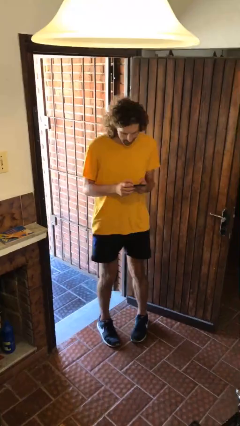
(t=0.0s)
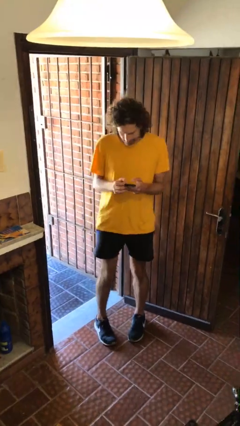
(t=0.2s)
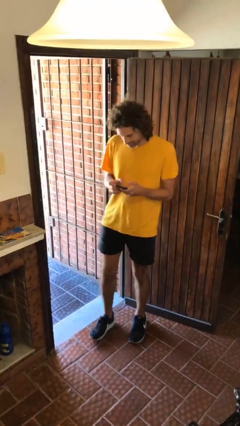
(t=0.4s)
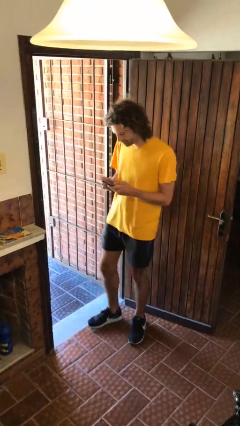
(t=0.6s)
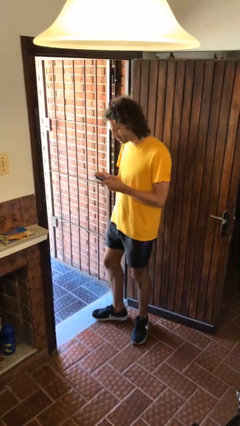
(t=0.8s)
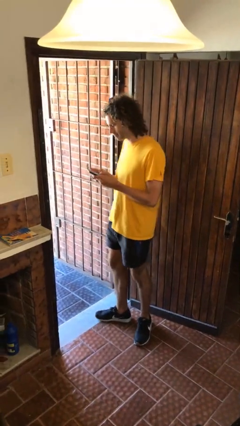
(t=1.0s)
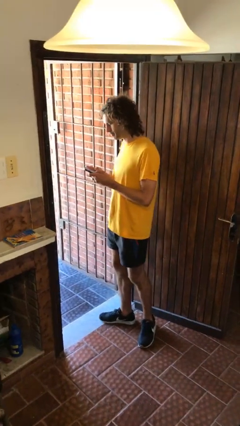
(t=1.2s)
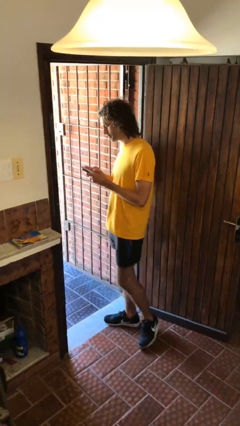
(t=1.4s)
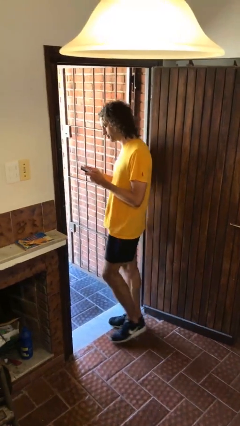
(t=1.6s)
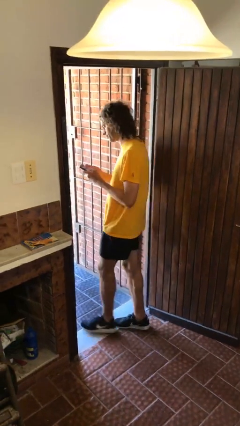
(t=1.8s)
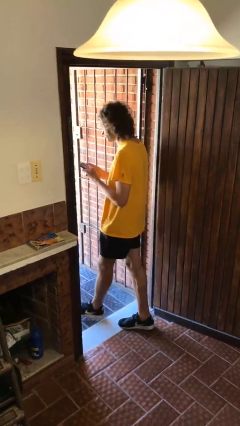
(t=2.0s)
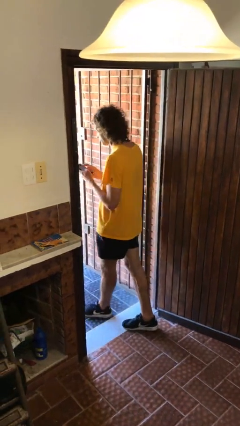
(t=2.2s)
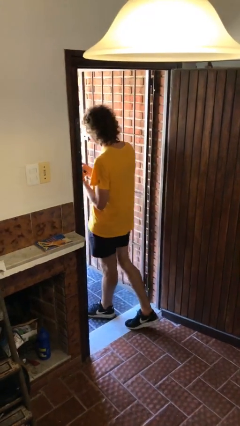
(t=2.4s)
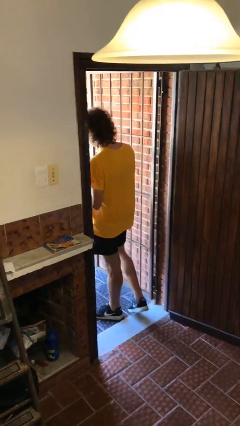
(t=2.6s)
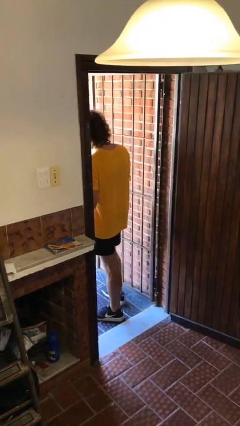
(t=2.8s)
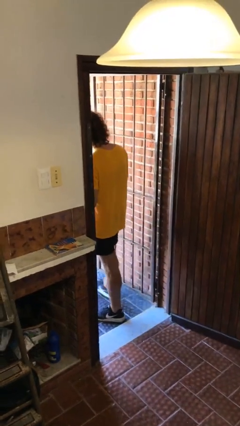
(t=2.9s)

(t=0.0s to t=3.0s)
person exits scene through structure

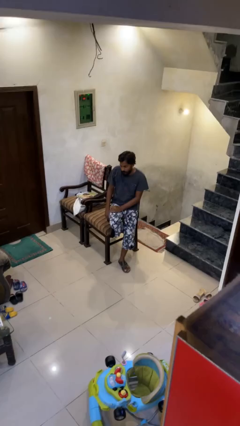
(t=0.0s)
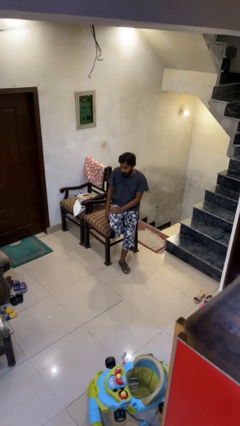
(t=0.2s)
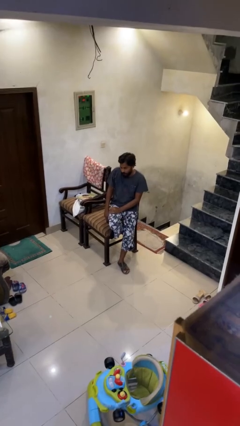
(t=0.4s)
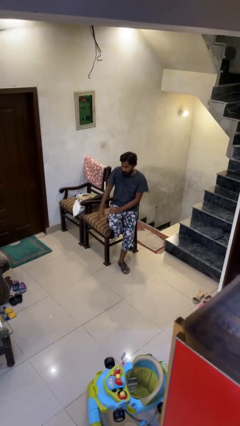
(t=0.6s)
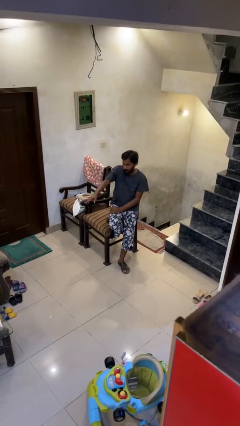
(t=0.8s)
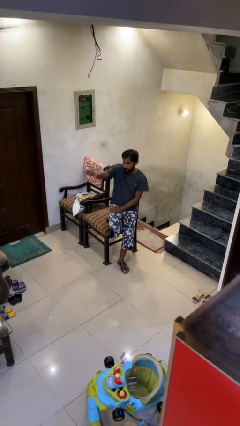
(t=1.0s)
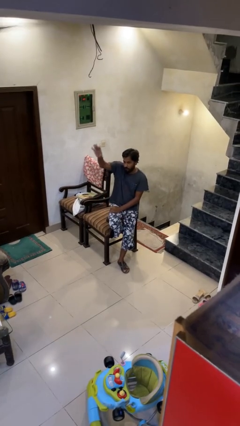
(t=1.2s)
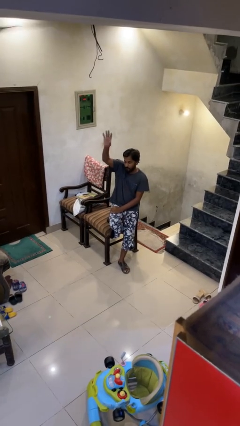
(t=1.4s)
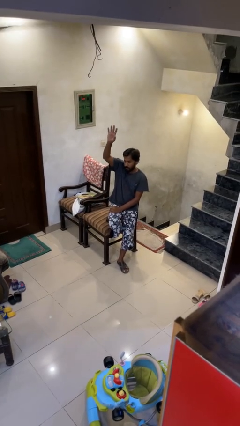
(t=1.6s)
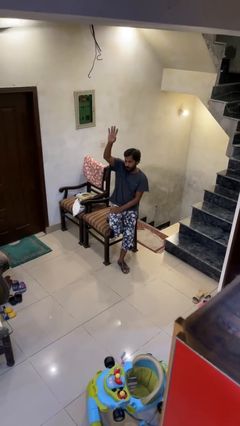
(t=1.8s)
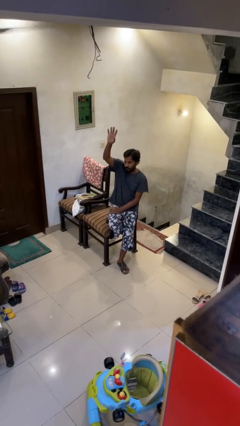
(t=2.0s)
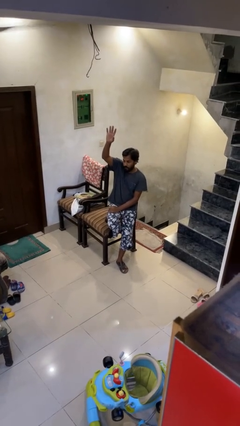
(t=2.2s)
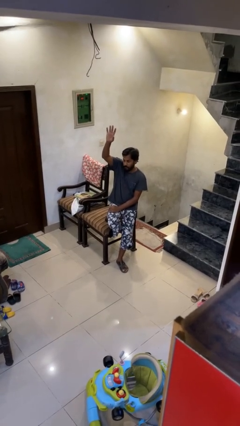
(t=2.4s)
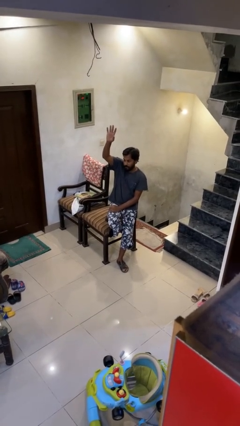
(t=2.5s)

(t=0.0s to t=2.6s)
person gestures raise hand

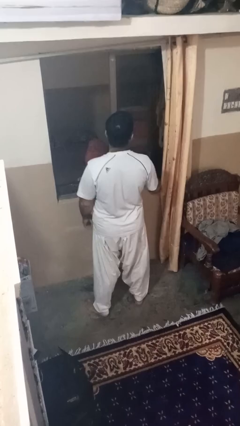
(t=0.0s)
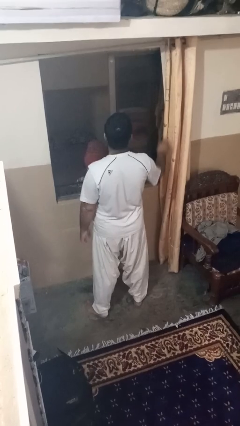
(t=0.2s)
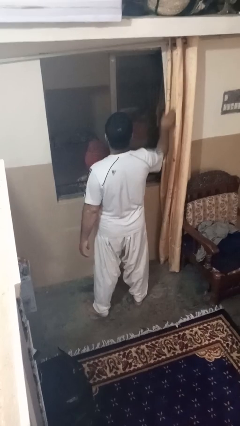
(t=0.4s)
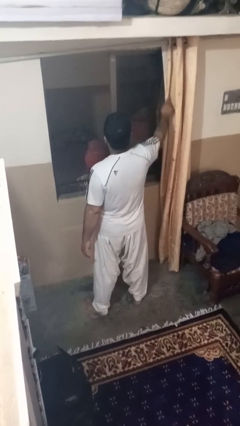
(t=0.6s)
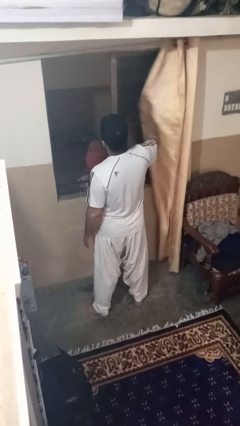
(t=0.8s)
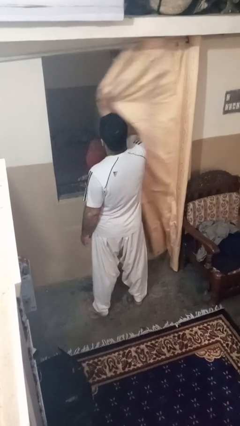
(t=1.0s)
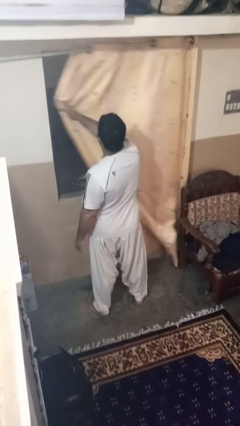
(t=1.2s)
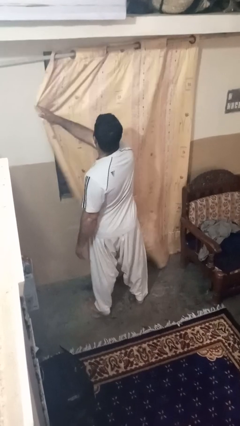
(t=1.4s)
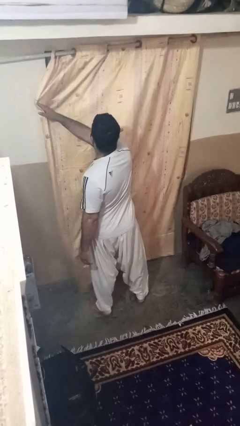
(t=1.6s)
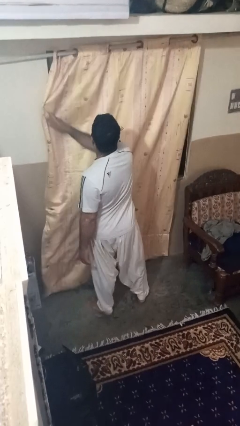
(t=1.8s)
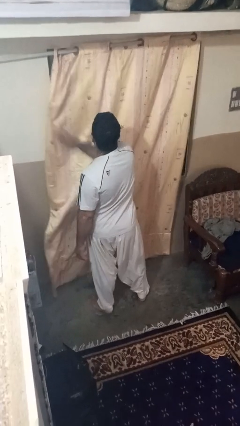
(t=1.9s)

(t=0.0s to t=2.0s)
person closes curtains

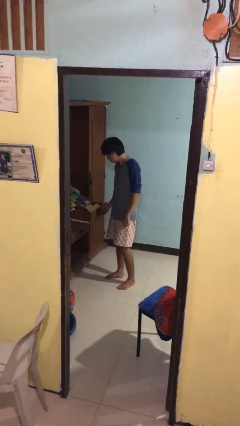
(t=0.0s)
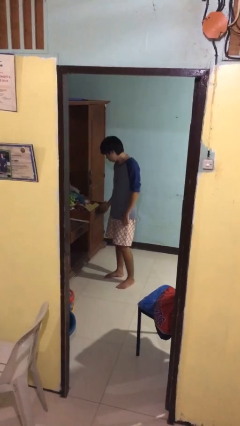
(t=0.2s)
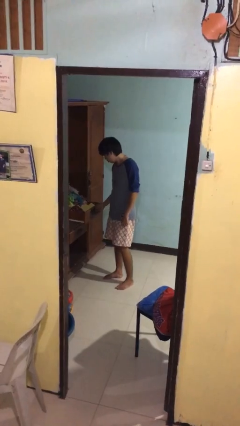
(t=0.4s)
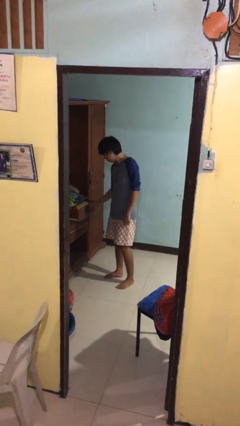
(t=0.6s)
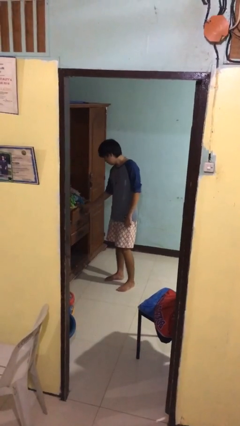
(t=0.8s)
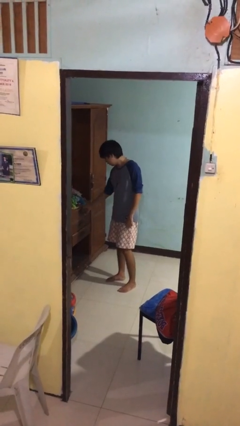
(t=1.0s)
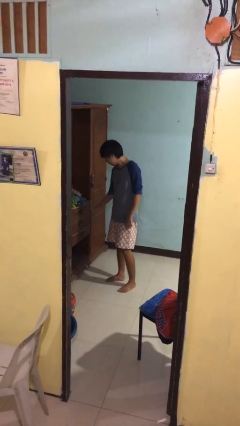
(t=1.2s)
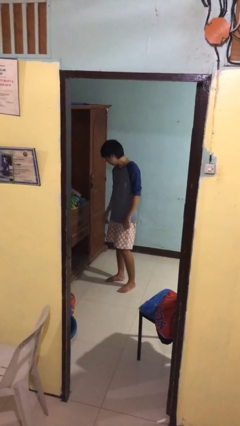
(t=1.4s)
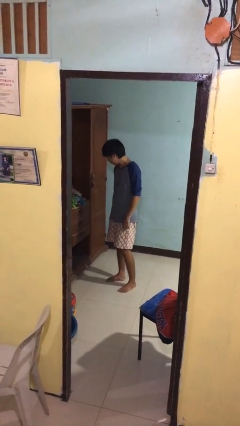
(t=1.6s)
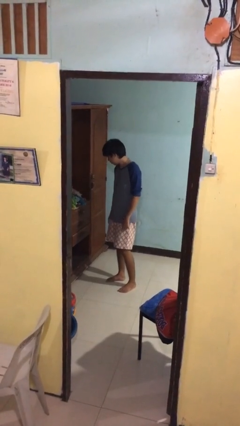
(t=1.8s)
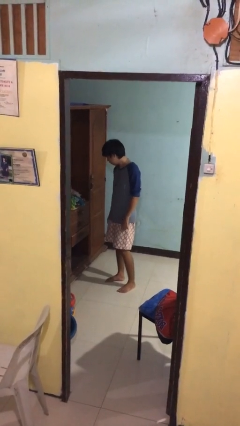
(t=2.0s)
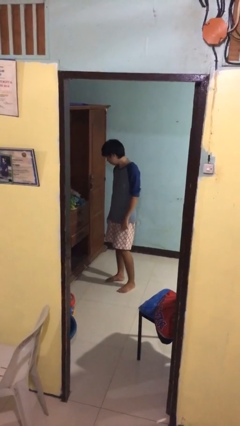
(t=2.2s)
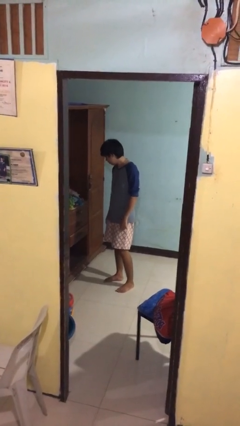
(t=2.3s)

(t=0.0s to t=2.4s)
person closes dresser drawer

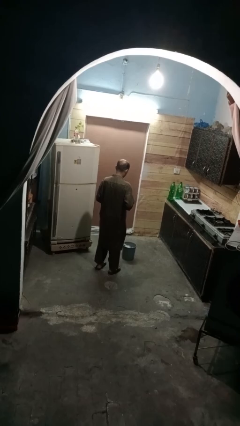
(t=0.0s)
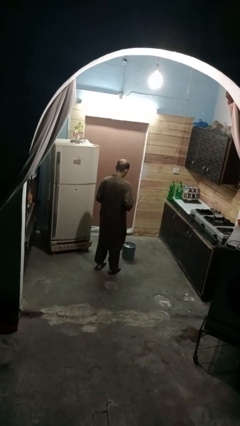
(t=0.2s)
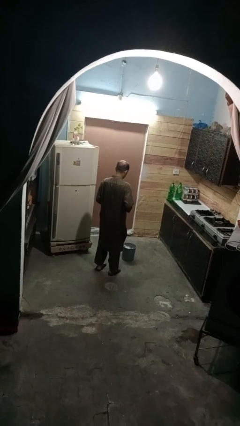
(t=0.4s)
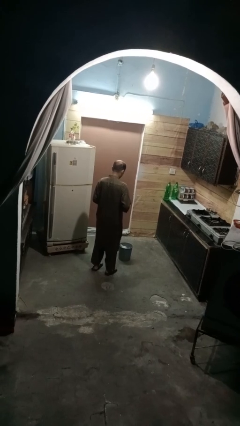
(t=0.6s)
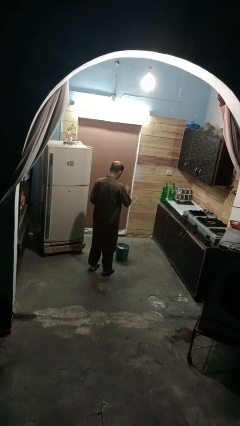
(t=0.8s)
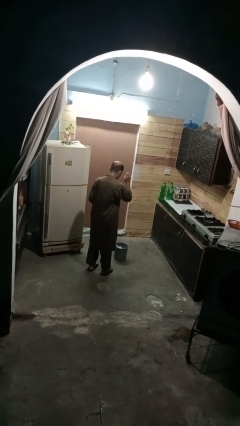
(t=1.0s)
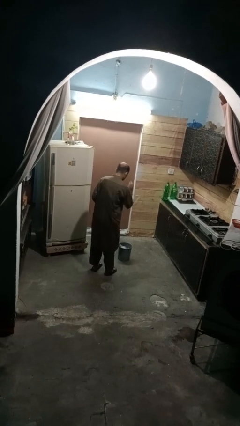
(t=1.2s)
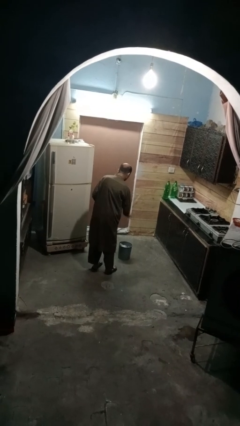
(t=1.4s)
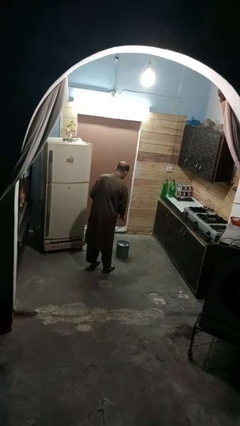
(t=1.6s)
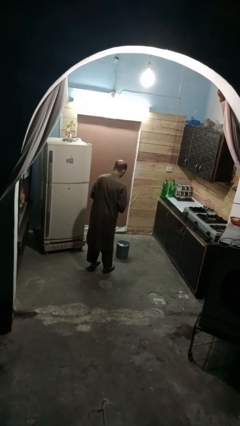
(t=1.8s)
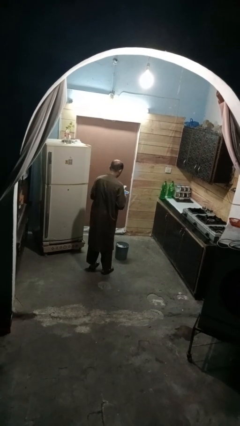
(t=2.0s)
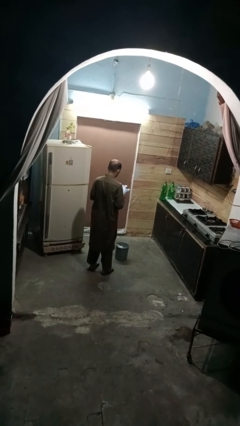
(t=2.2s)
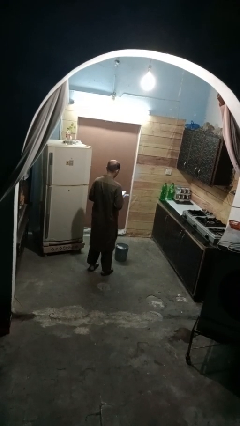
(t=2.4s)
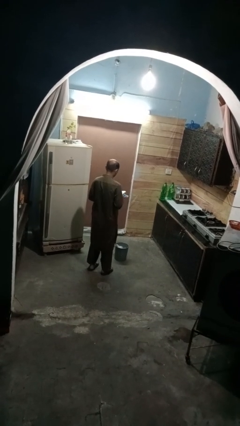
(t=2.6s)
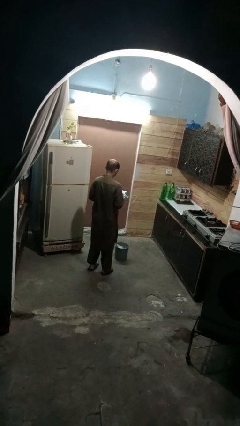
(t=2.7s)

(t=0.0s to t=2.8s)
person discards trash

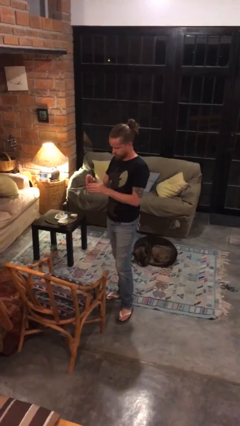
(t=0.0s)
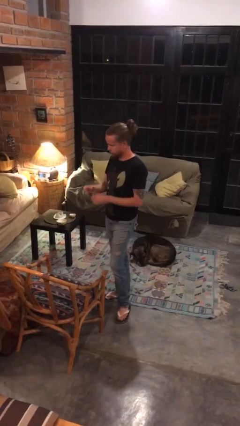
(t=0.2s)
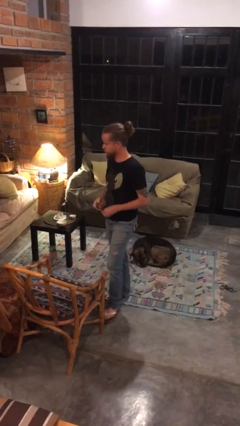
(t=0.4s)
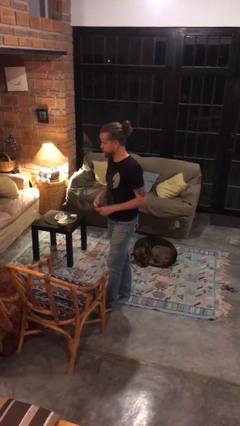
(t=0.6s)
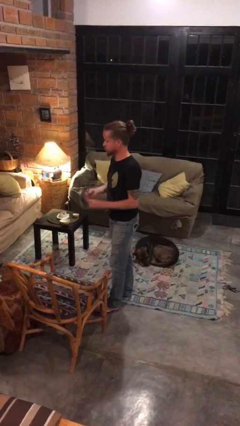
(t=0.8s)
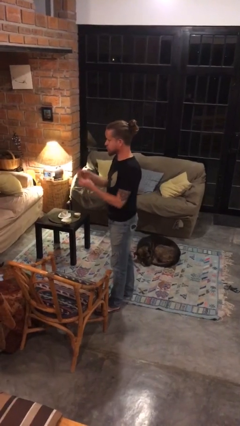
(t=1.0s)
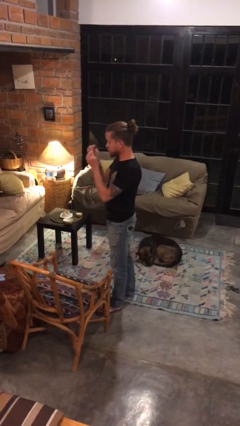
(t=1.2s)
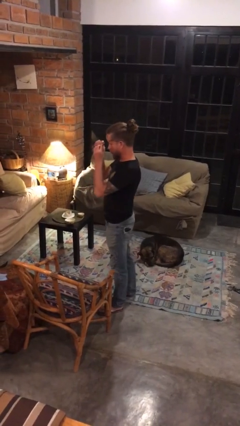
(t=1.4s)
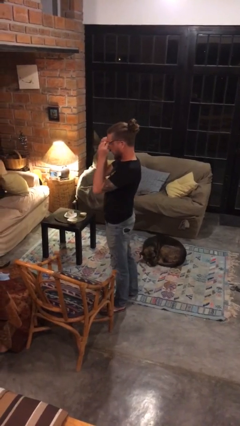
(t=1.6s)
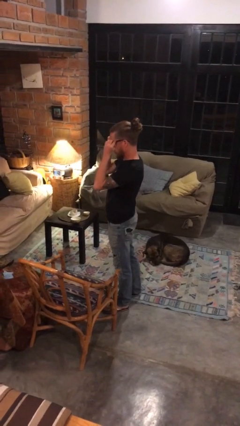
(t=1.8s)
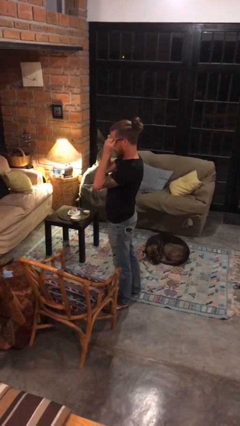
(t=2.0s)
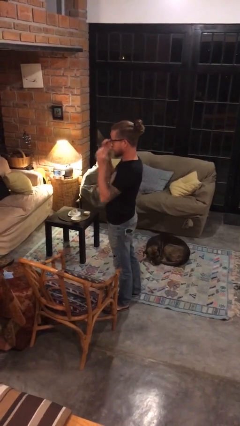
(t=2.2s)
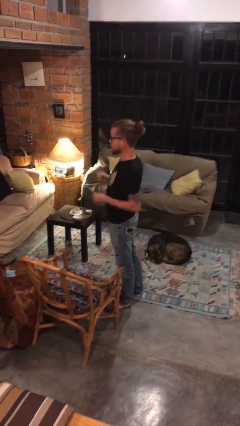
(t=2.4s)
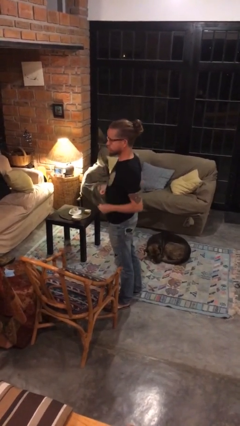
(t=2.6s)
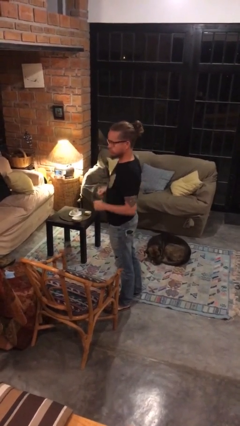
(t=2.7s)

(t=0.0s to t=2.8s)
person puts on glasses

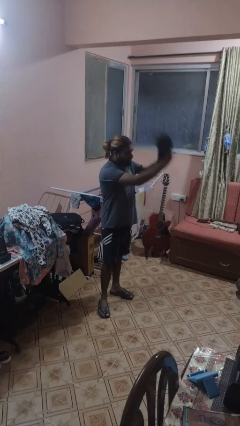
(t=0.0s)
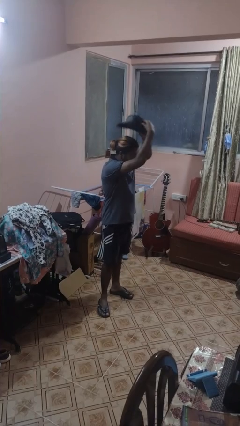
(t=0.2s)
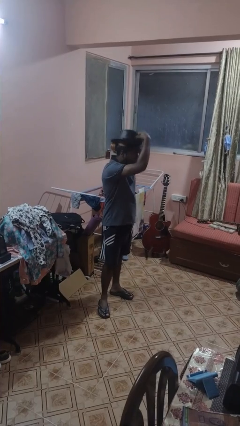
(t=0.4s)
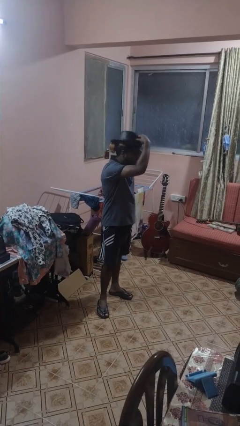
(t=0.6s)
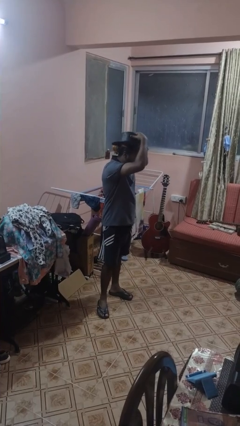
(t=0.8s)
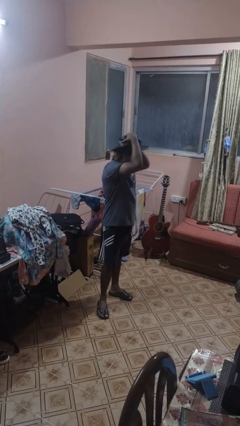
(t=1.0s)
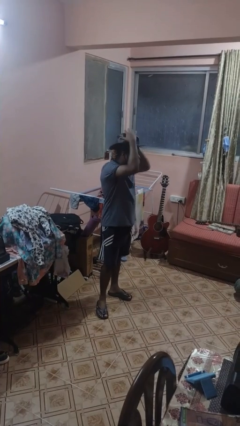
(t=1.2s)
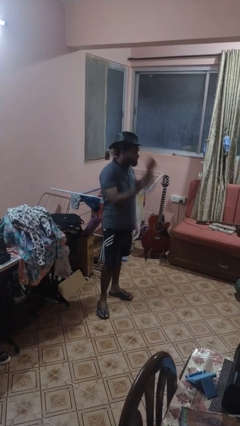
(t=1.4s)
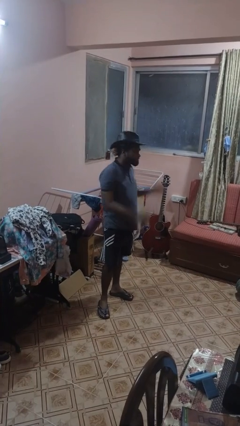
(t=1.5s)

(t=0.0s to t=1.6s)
person puts on hat
